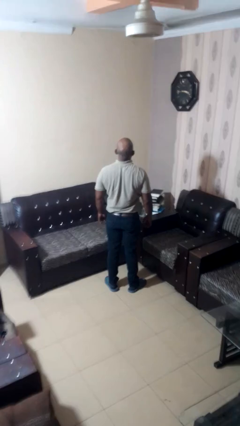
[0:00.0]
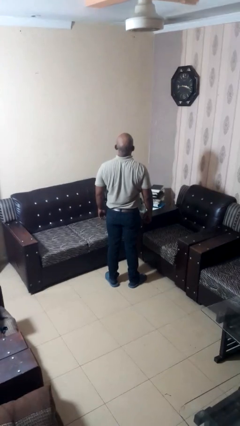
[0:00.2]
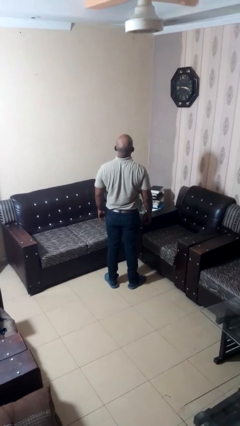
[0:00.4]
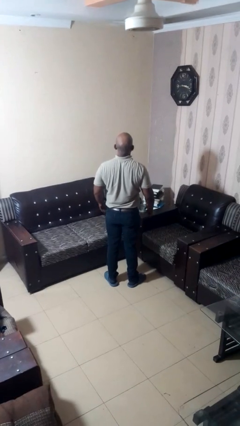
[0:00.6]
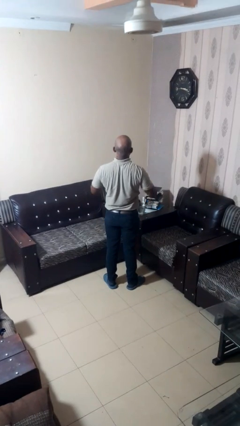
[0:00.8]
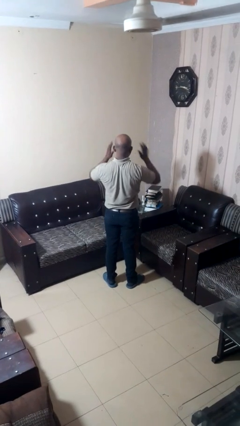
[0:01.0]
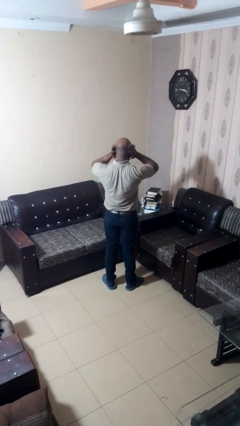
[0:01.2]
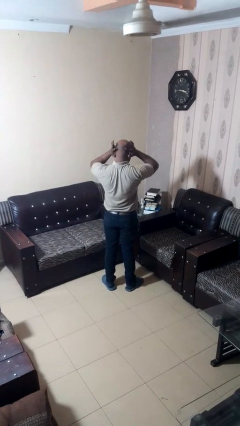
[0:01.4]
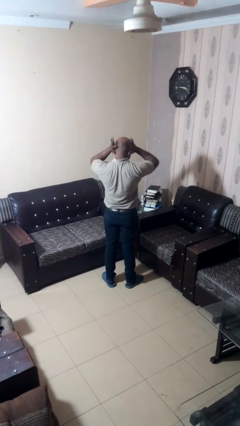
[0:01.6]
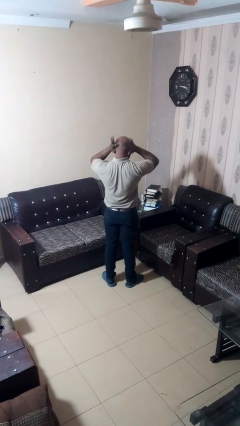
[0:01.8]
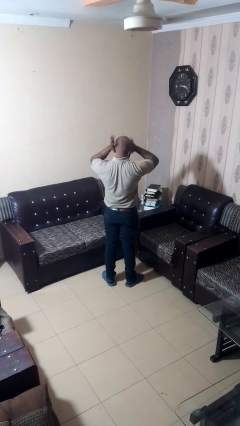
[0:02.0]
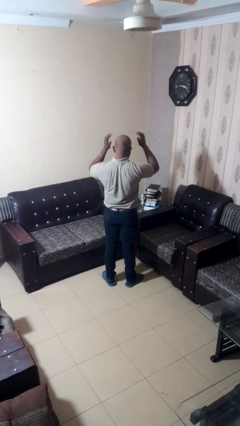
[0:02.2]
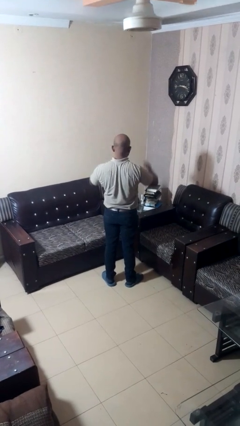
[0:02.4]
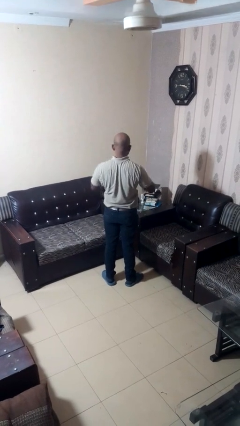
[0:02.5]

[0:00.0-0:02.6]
person touches earlobe

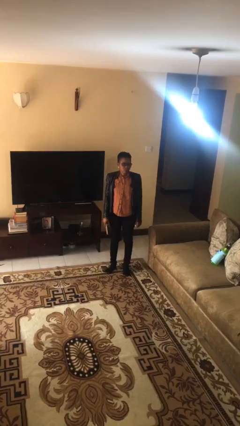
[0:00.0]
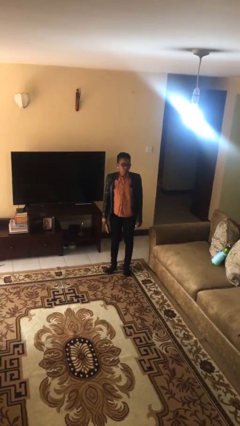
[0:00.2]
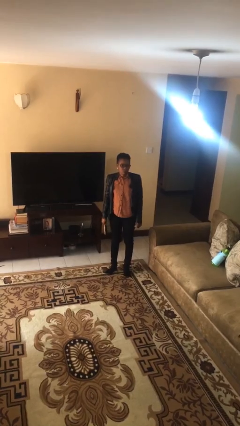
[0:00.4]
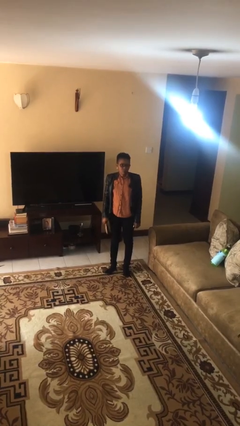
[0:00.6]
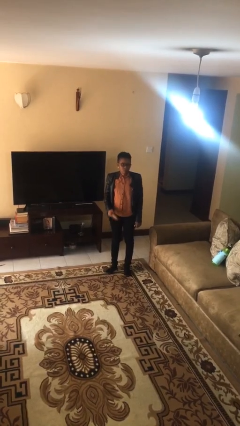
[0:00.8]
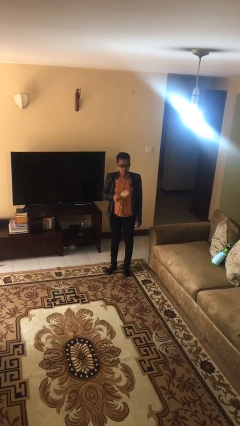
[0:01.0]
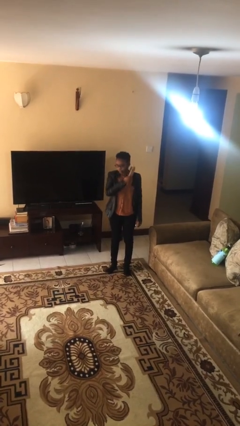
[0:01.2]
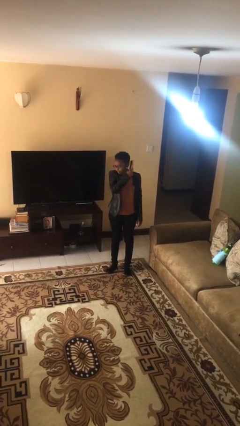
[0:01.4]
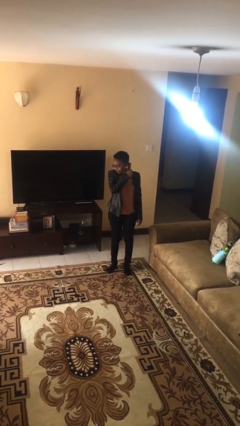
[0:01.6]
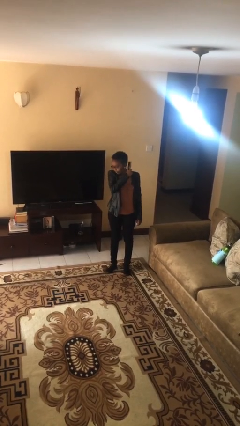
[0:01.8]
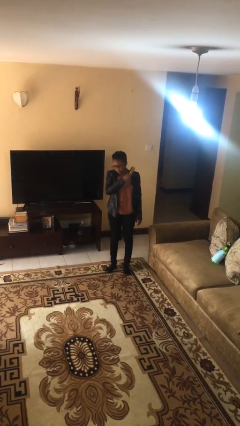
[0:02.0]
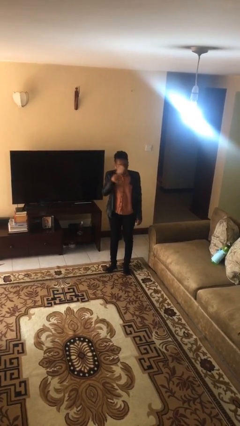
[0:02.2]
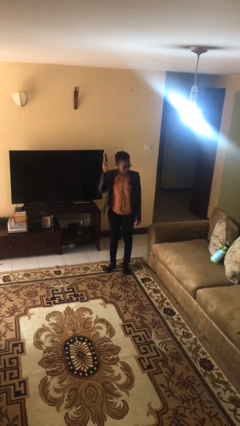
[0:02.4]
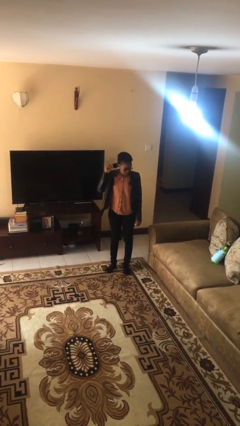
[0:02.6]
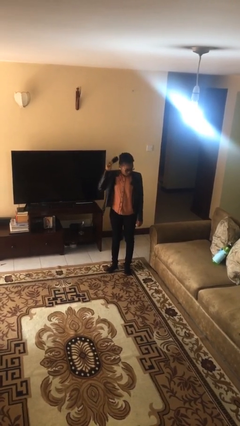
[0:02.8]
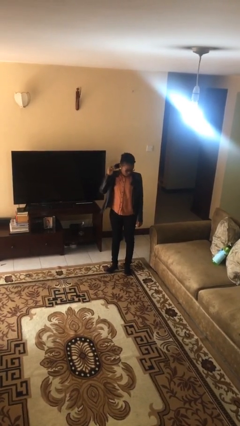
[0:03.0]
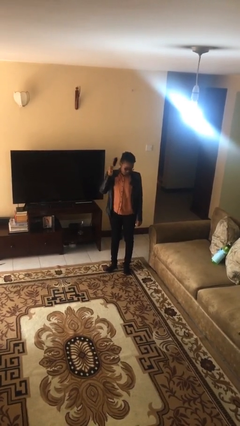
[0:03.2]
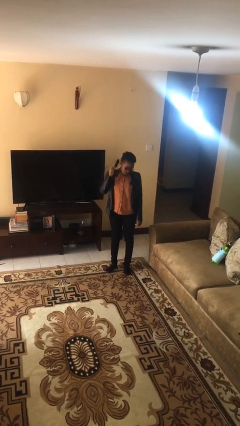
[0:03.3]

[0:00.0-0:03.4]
person brushes hair

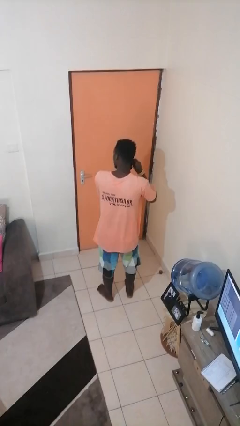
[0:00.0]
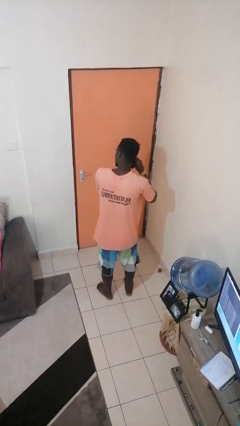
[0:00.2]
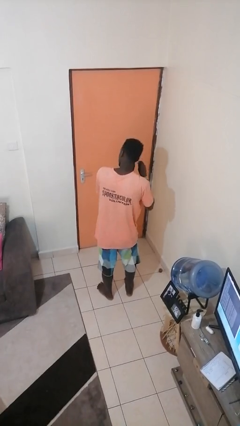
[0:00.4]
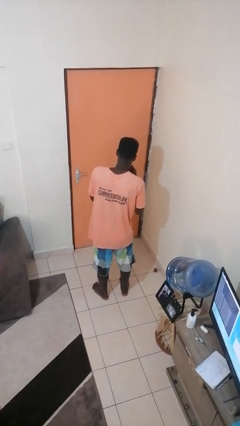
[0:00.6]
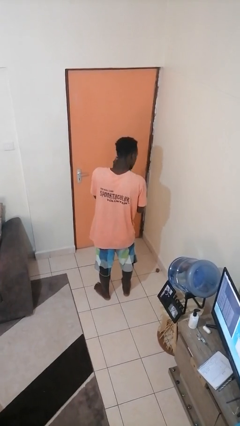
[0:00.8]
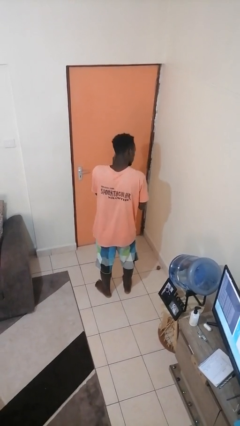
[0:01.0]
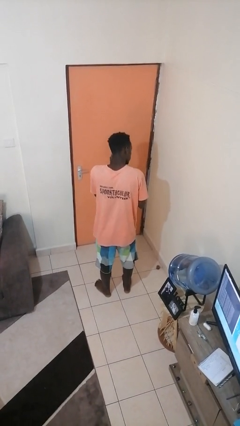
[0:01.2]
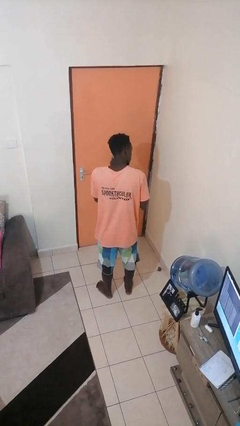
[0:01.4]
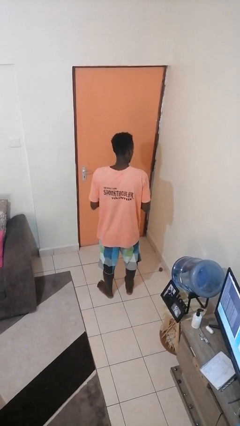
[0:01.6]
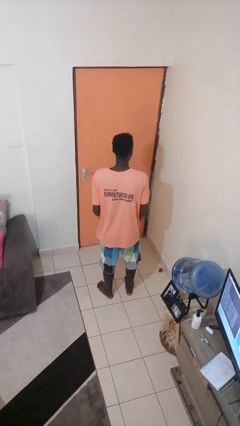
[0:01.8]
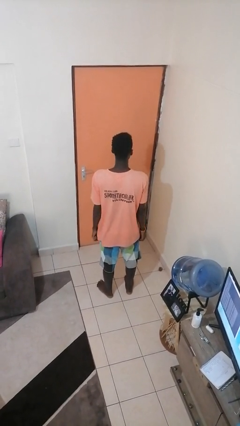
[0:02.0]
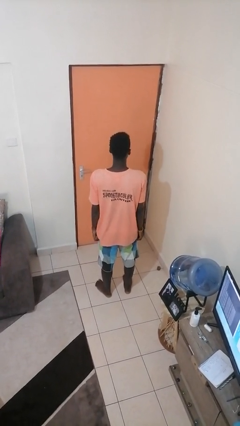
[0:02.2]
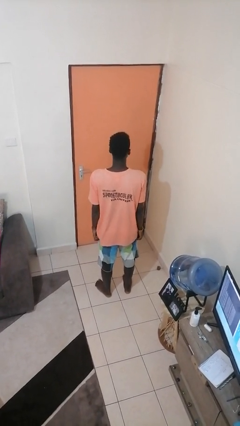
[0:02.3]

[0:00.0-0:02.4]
person takes off earrings

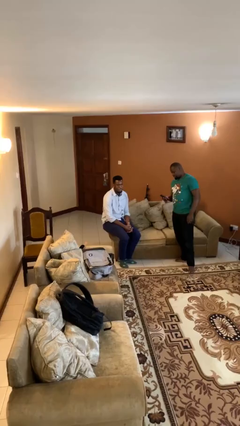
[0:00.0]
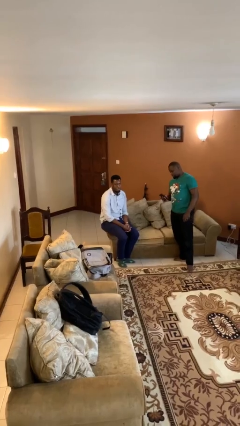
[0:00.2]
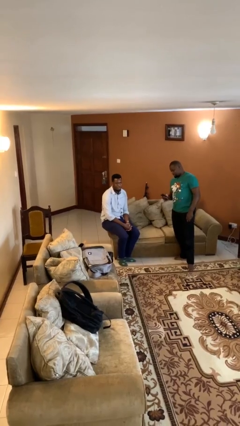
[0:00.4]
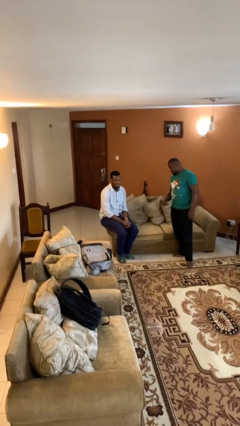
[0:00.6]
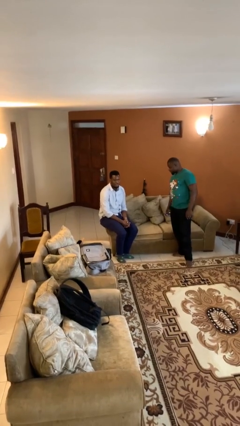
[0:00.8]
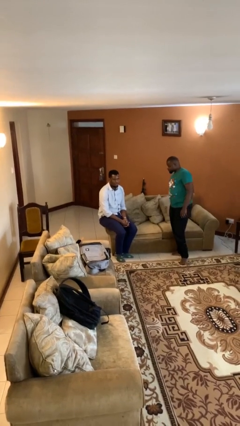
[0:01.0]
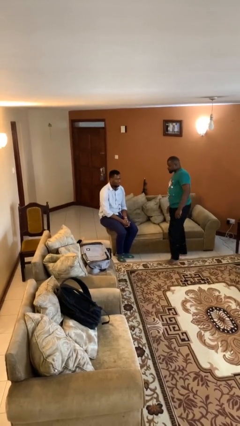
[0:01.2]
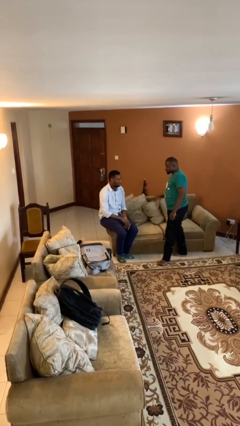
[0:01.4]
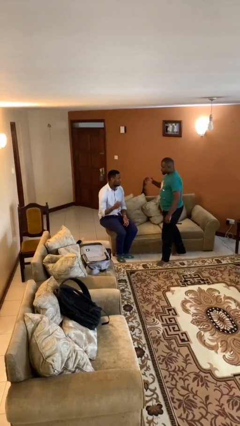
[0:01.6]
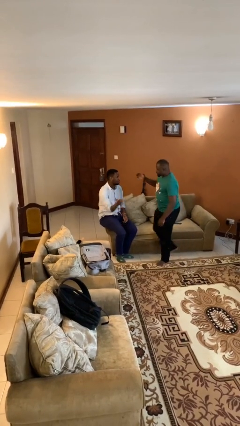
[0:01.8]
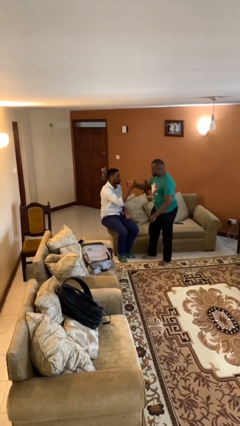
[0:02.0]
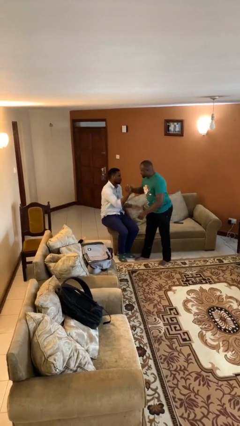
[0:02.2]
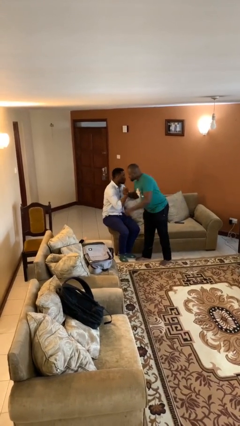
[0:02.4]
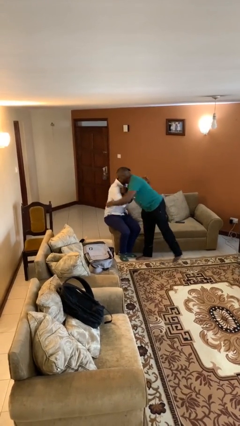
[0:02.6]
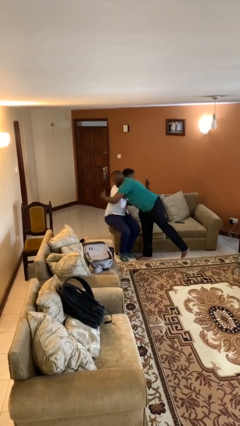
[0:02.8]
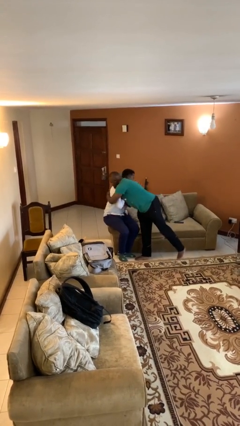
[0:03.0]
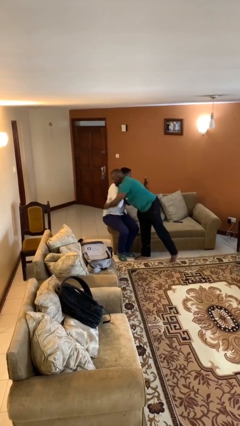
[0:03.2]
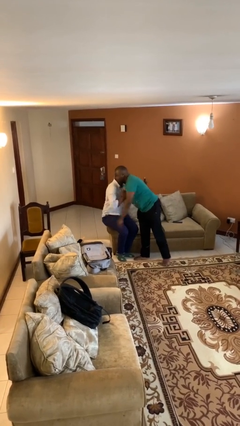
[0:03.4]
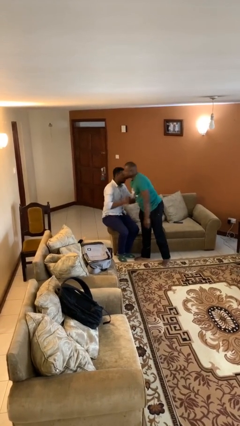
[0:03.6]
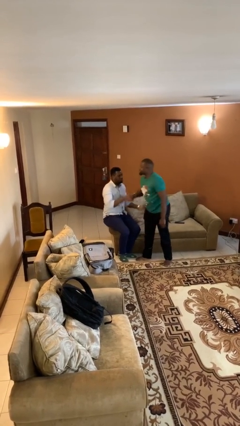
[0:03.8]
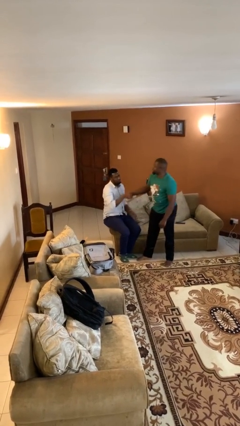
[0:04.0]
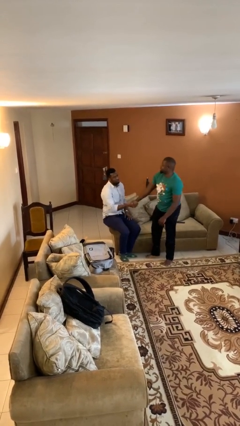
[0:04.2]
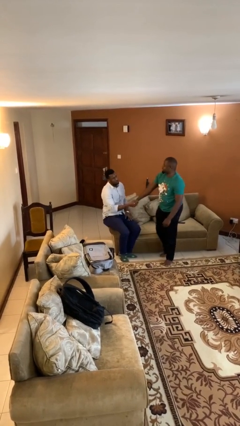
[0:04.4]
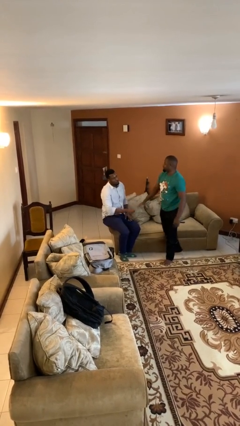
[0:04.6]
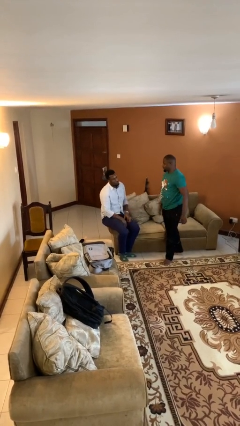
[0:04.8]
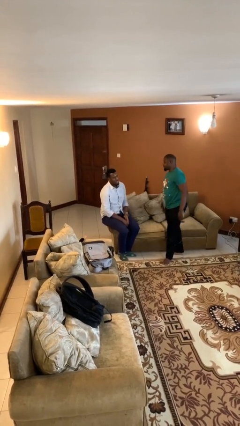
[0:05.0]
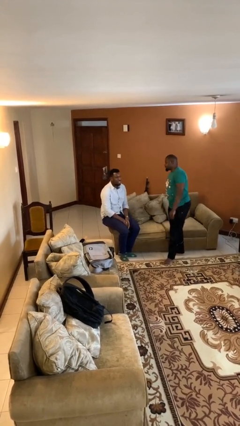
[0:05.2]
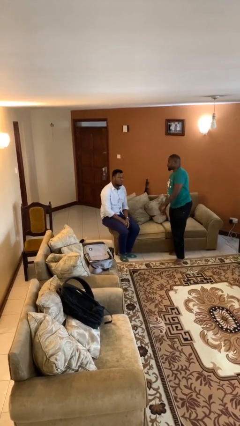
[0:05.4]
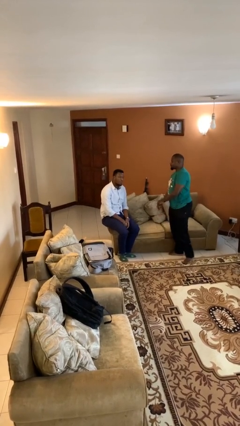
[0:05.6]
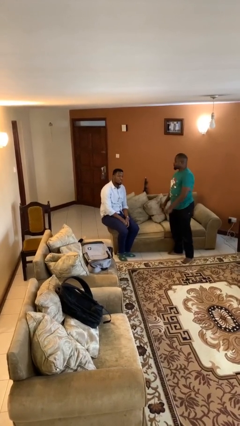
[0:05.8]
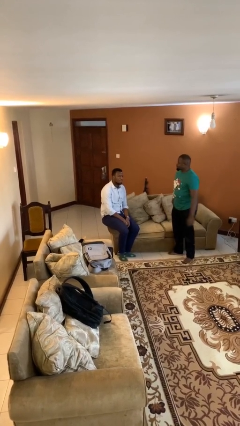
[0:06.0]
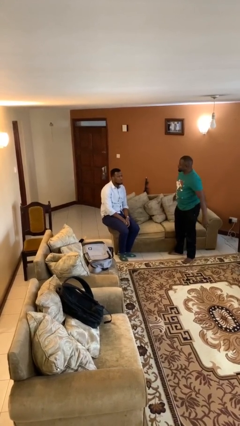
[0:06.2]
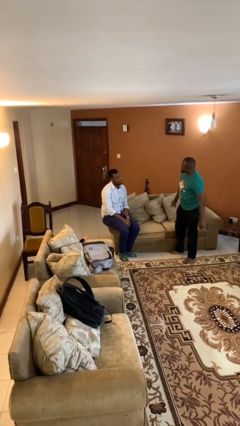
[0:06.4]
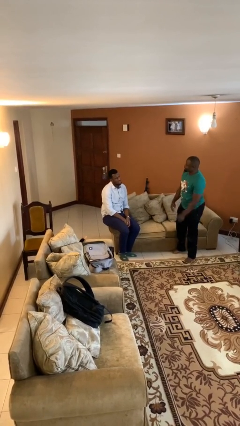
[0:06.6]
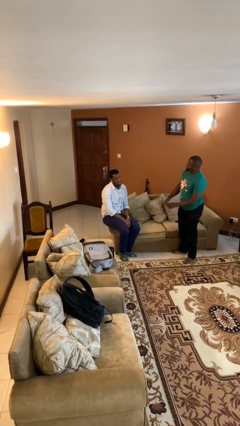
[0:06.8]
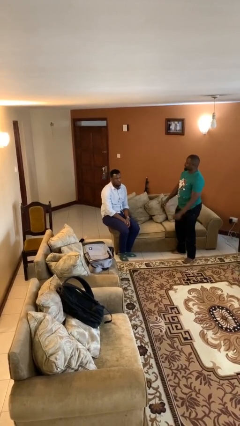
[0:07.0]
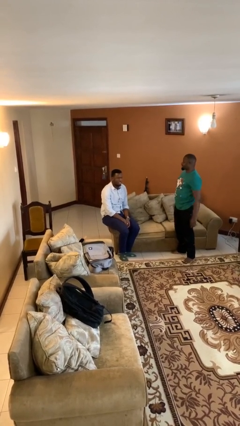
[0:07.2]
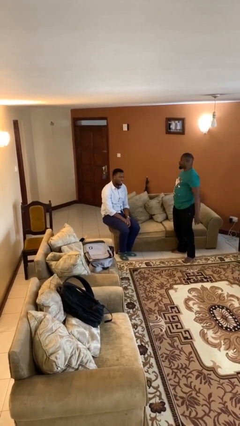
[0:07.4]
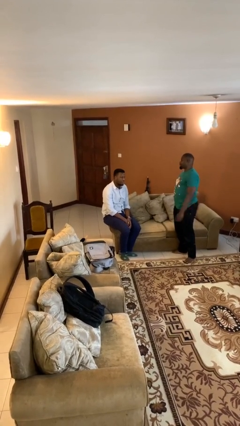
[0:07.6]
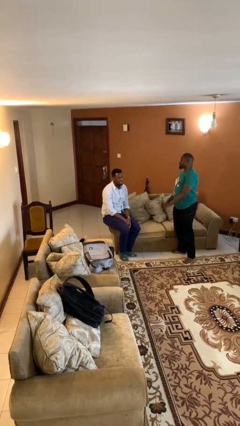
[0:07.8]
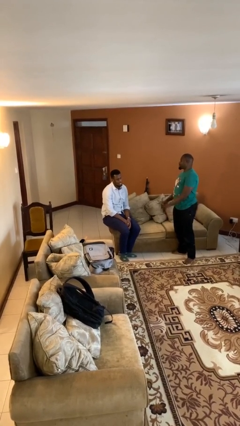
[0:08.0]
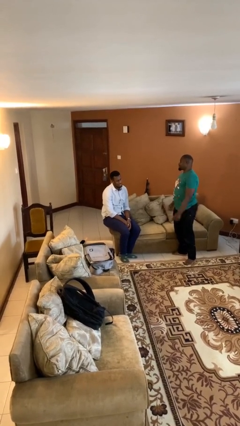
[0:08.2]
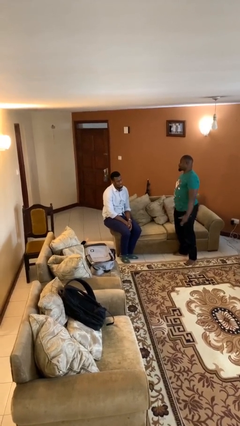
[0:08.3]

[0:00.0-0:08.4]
person embraces person

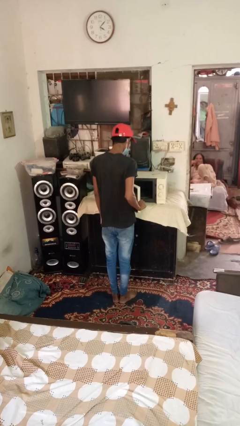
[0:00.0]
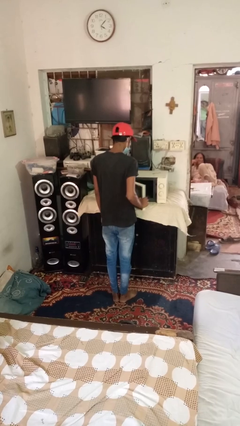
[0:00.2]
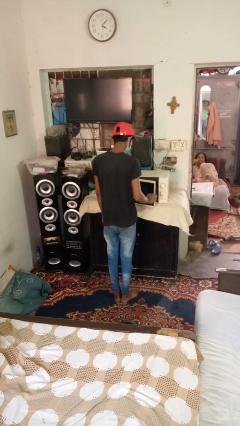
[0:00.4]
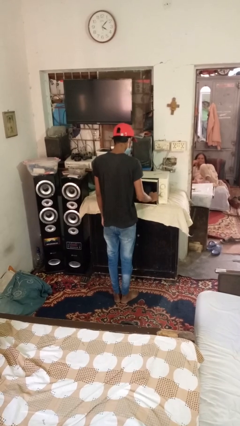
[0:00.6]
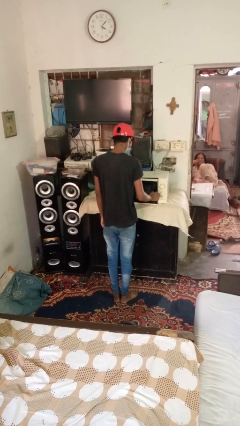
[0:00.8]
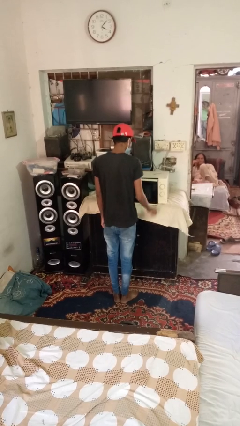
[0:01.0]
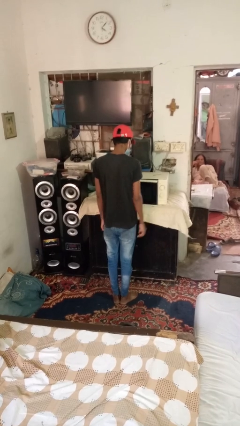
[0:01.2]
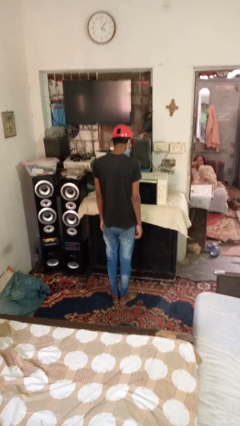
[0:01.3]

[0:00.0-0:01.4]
person closes dishwasher
